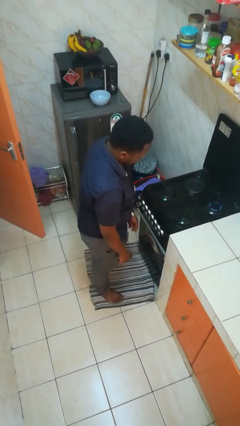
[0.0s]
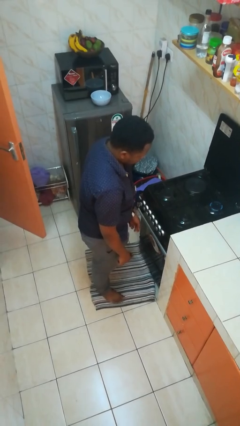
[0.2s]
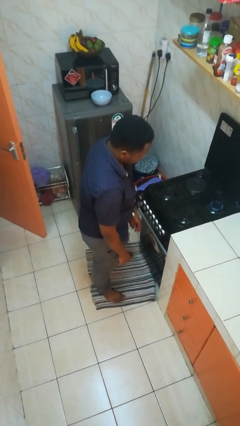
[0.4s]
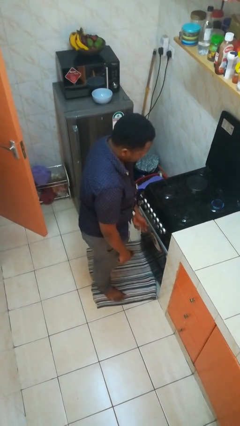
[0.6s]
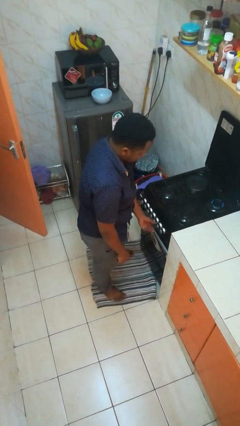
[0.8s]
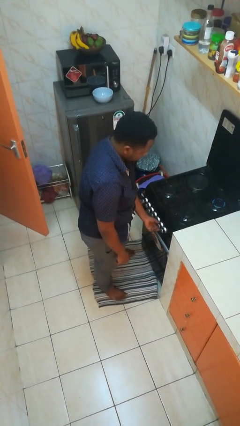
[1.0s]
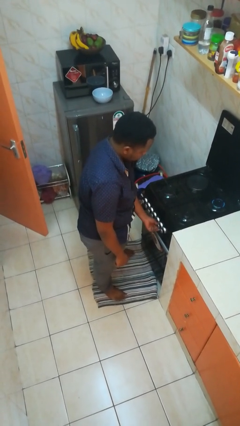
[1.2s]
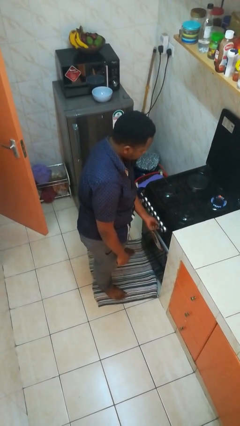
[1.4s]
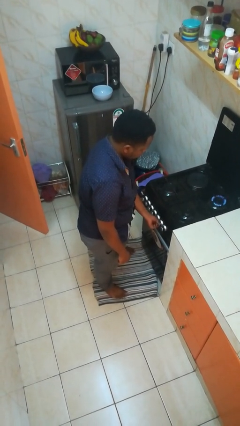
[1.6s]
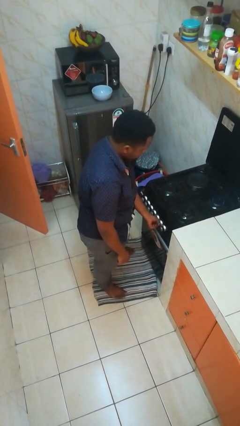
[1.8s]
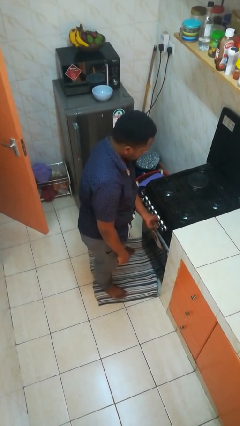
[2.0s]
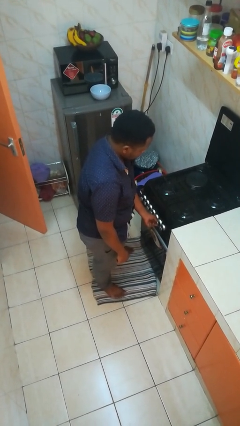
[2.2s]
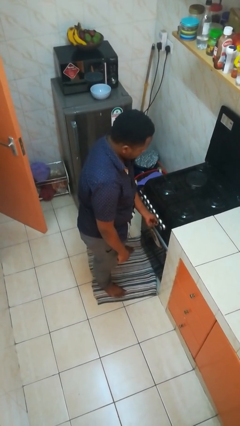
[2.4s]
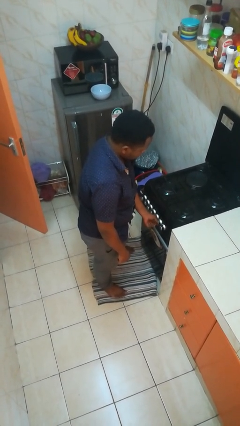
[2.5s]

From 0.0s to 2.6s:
person turns off stovetop

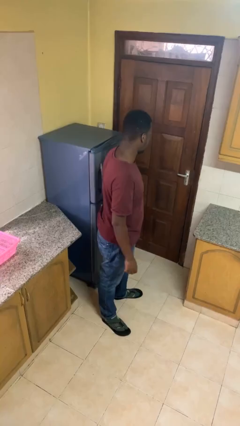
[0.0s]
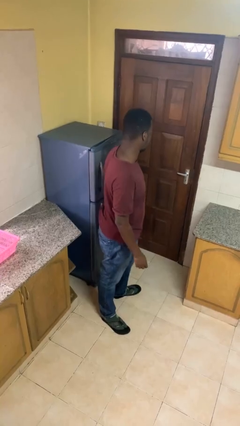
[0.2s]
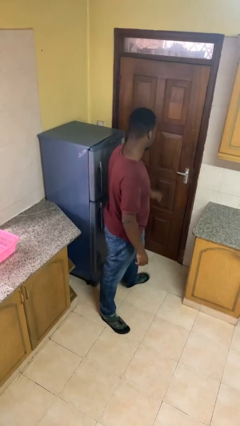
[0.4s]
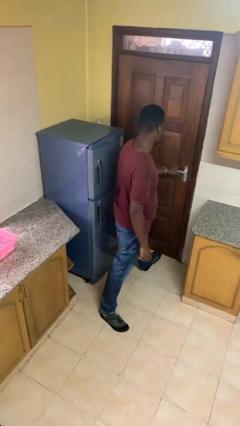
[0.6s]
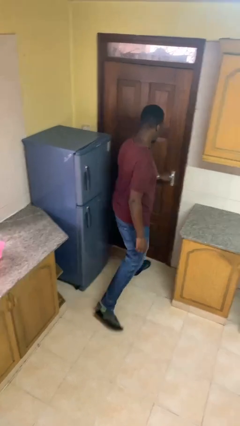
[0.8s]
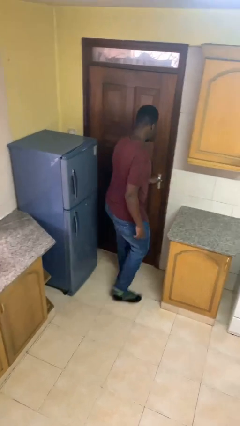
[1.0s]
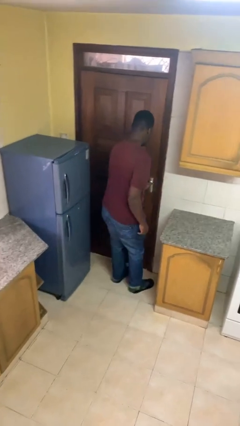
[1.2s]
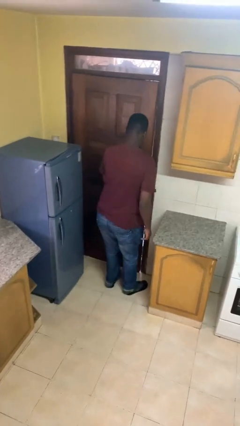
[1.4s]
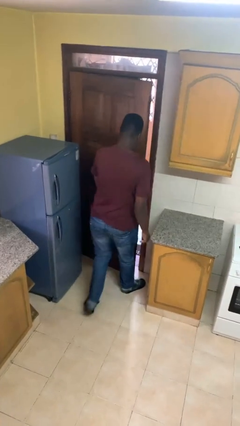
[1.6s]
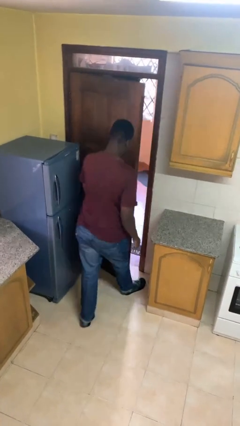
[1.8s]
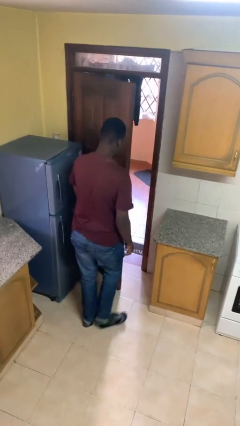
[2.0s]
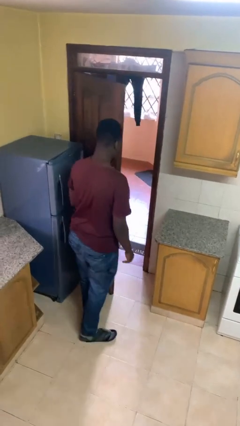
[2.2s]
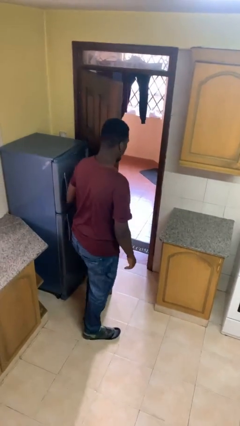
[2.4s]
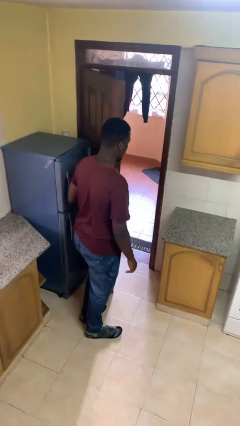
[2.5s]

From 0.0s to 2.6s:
person opens facility door

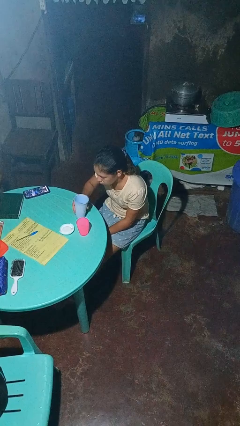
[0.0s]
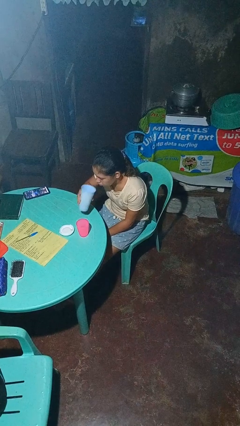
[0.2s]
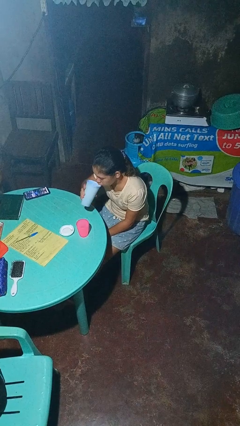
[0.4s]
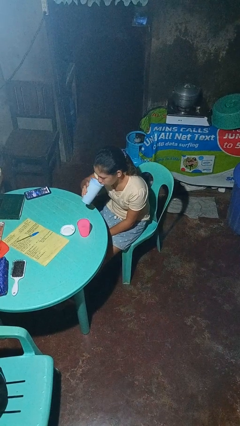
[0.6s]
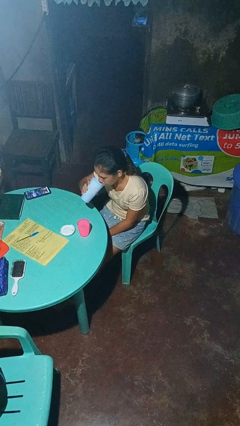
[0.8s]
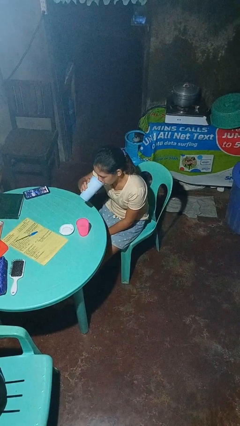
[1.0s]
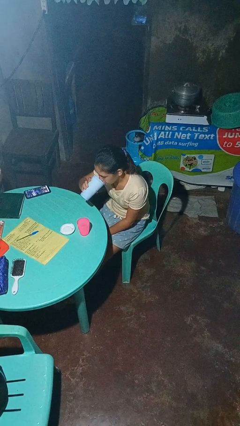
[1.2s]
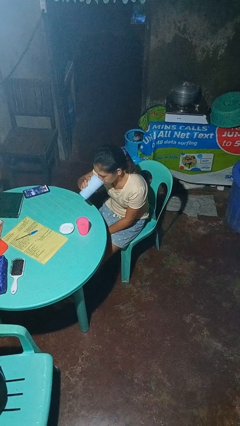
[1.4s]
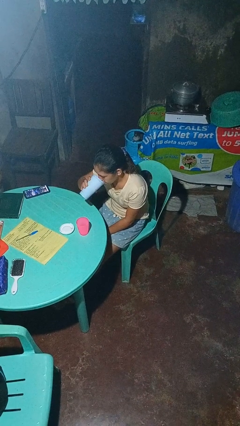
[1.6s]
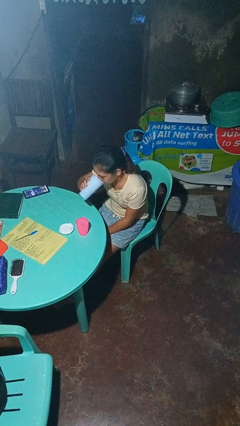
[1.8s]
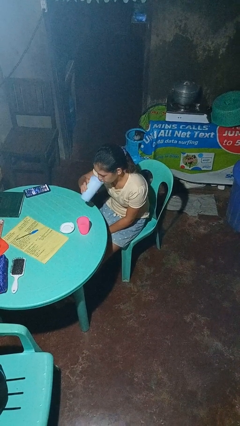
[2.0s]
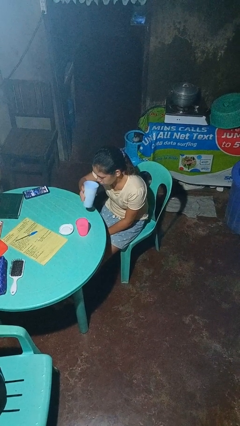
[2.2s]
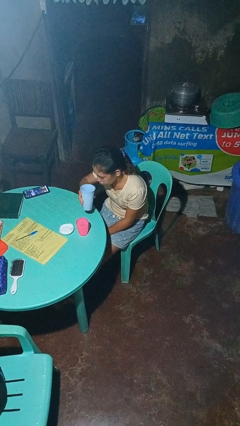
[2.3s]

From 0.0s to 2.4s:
person drinks from bottle

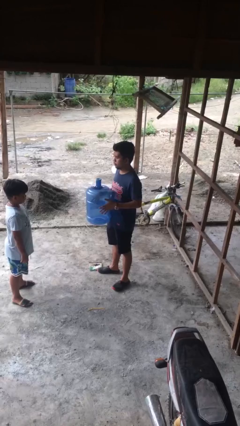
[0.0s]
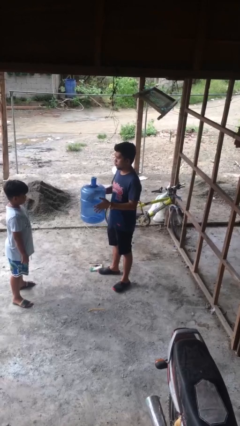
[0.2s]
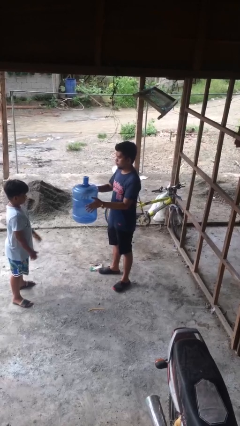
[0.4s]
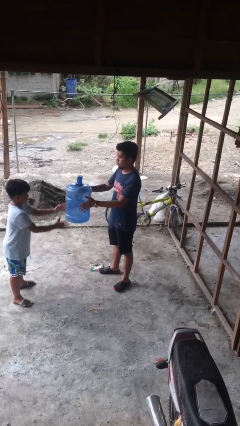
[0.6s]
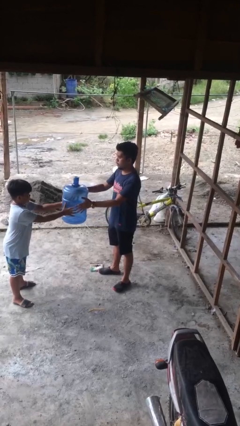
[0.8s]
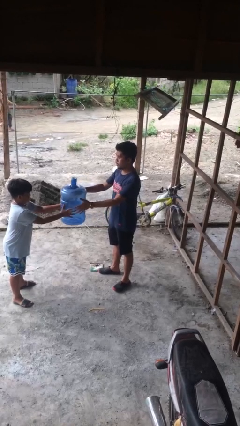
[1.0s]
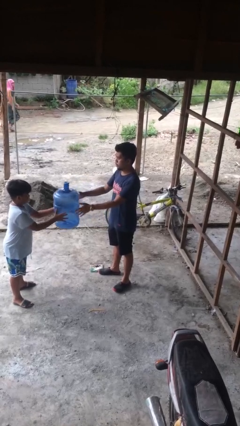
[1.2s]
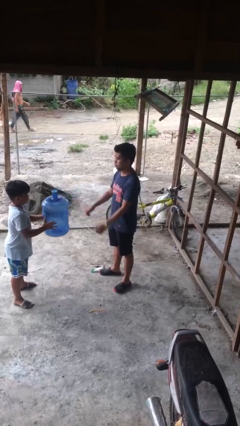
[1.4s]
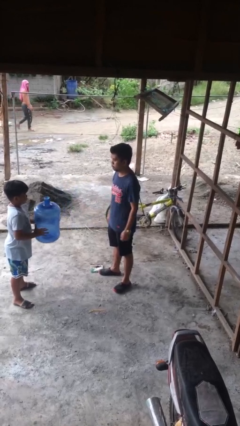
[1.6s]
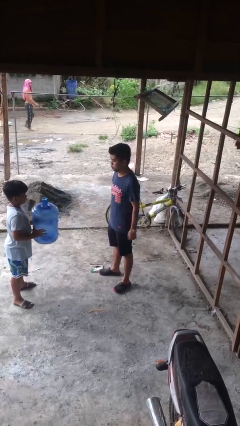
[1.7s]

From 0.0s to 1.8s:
person transfers object to person

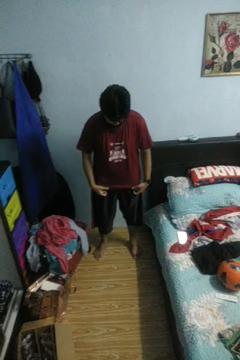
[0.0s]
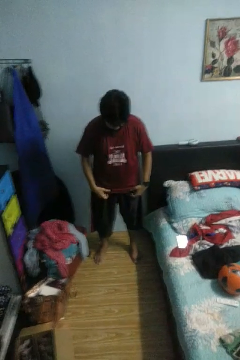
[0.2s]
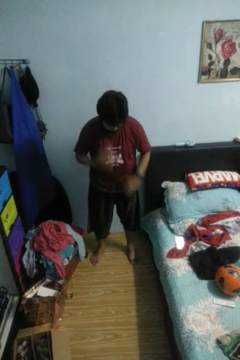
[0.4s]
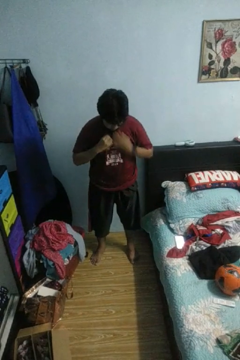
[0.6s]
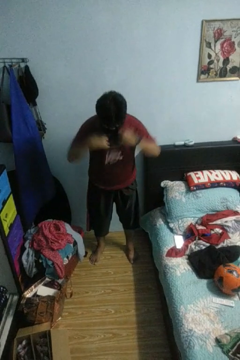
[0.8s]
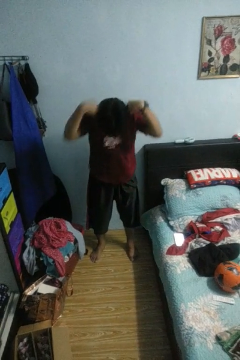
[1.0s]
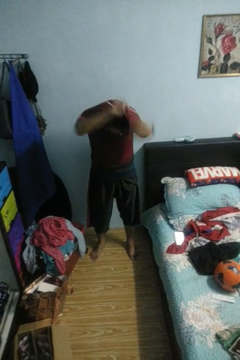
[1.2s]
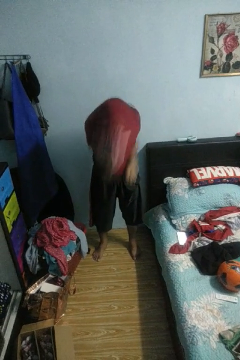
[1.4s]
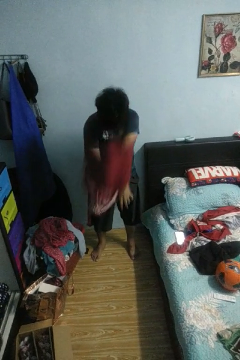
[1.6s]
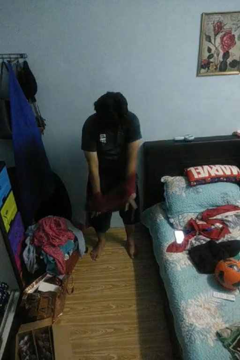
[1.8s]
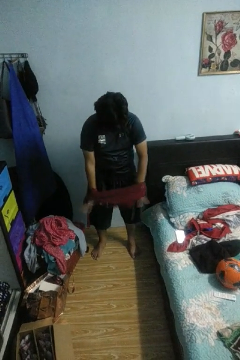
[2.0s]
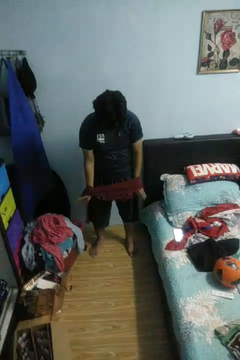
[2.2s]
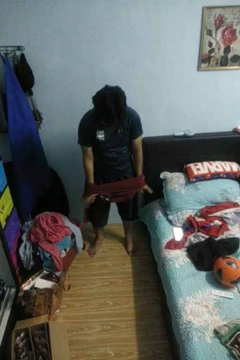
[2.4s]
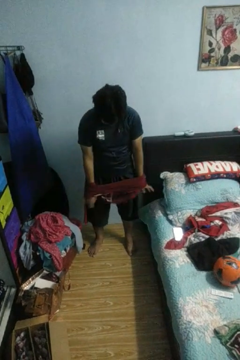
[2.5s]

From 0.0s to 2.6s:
person takes off shirt

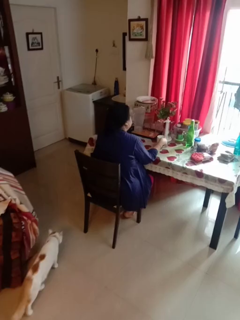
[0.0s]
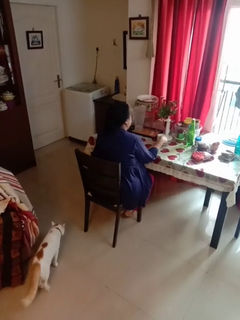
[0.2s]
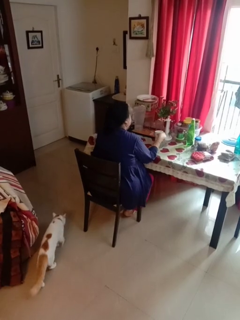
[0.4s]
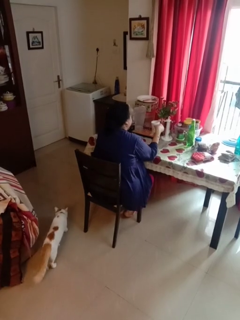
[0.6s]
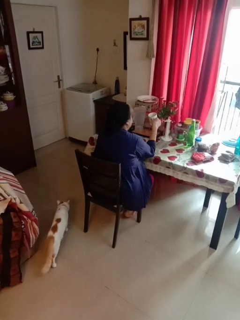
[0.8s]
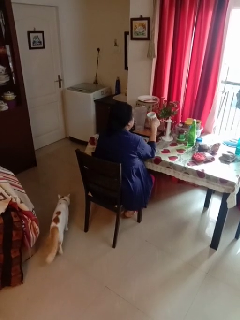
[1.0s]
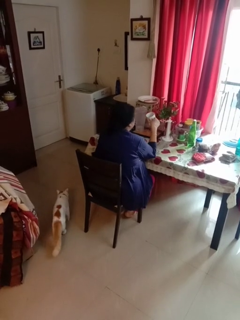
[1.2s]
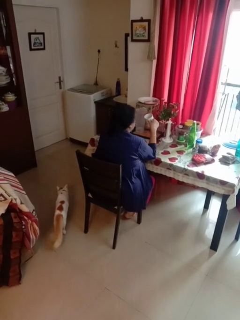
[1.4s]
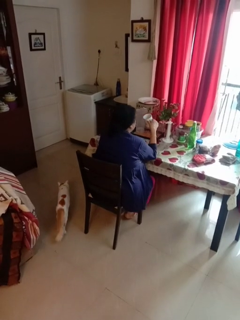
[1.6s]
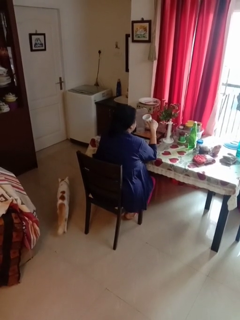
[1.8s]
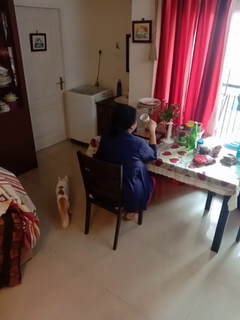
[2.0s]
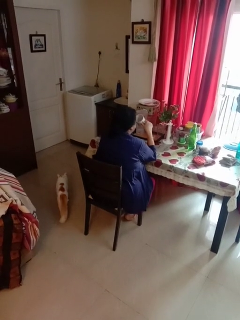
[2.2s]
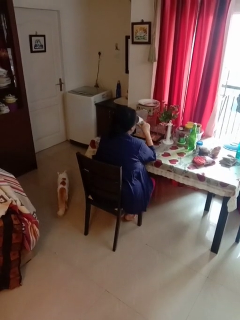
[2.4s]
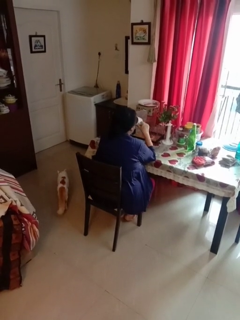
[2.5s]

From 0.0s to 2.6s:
person picks up object from table

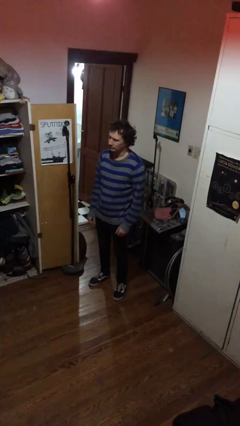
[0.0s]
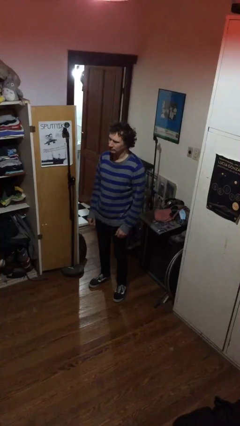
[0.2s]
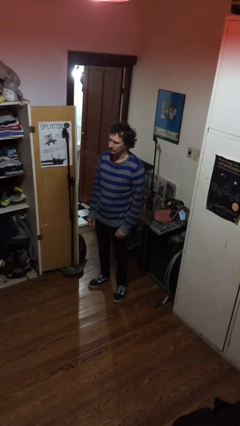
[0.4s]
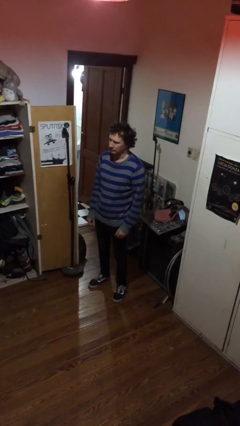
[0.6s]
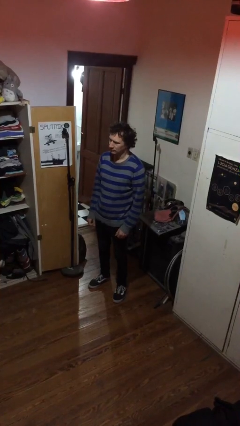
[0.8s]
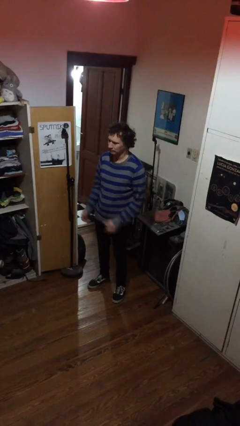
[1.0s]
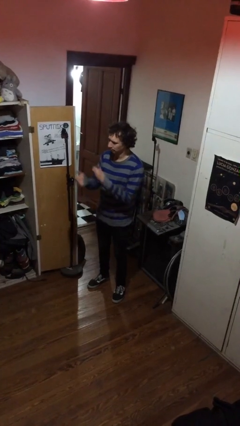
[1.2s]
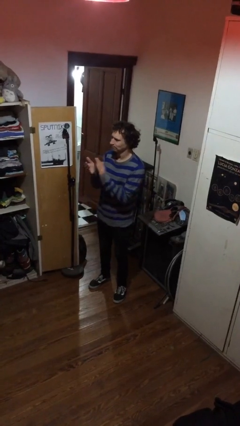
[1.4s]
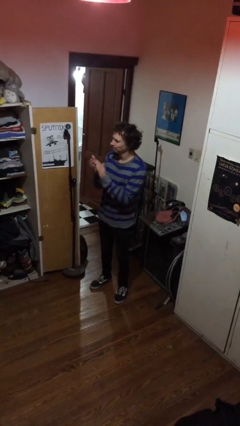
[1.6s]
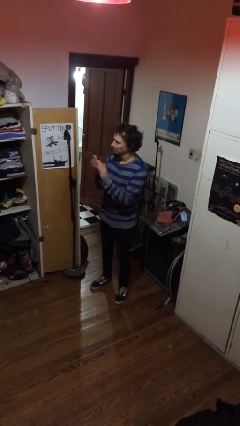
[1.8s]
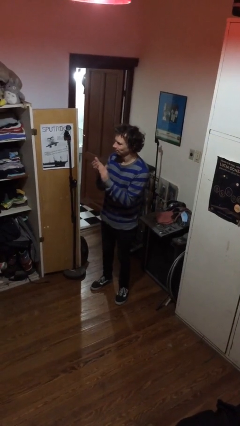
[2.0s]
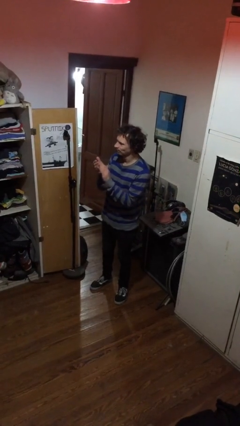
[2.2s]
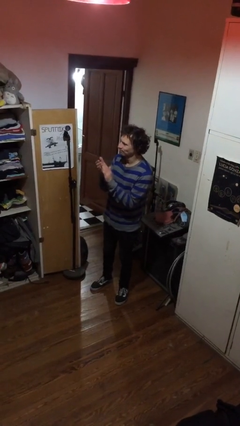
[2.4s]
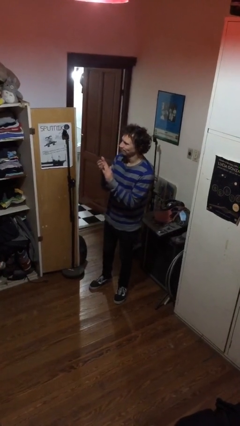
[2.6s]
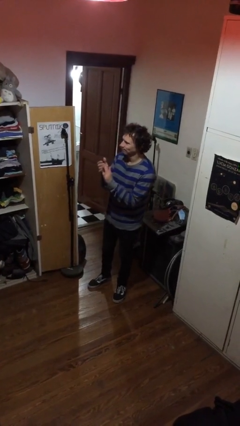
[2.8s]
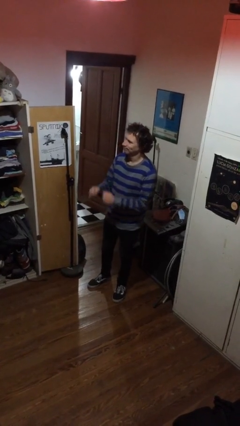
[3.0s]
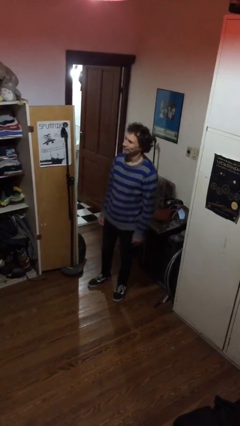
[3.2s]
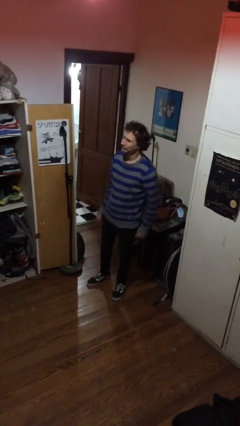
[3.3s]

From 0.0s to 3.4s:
person claps hands

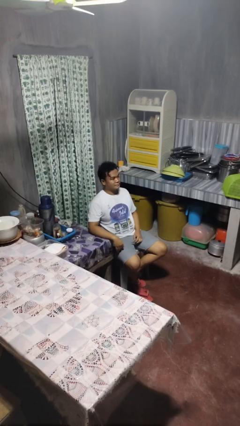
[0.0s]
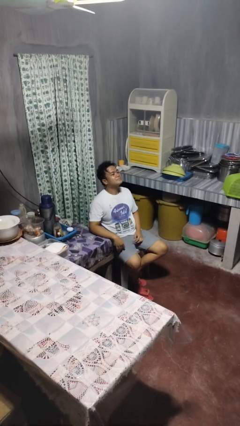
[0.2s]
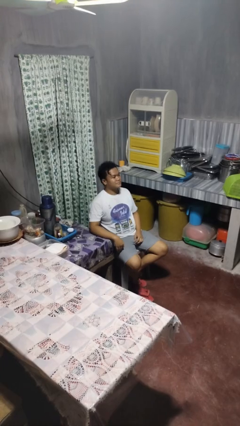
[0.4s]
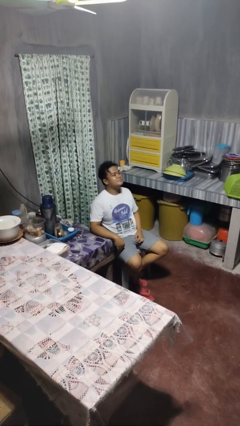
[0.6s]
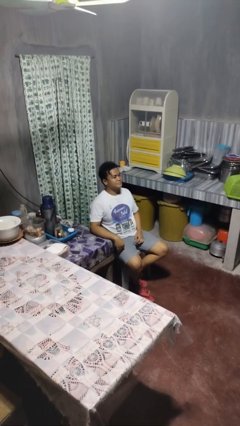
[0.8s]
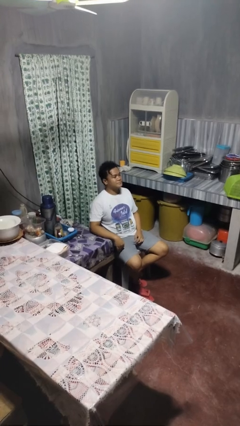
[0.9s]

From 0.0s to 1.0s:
person nods head
